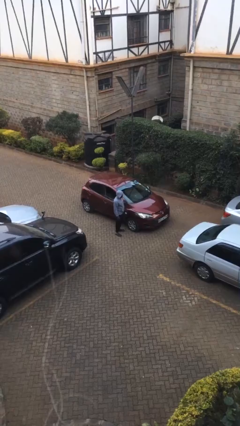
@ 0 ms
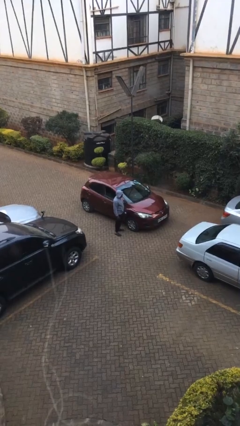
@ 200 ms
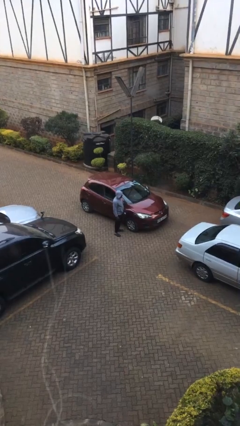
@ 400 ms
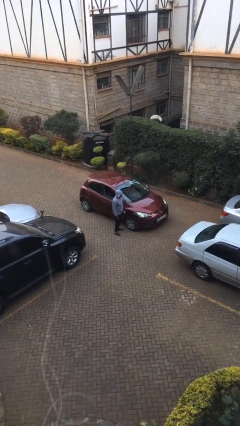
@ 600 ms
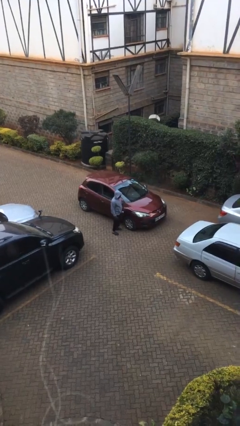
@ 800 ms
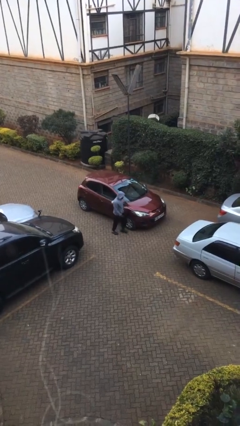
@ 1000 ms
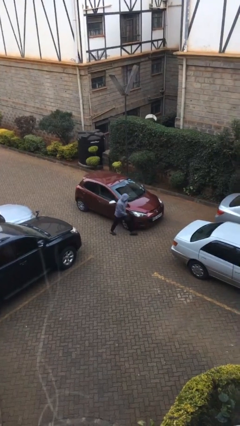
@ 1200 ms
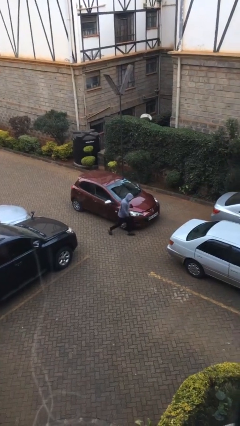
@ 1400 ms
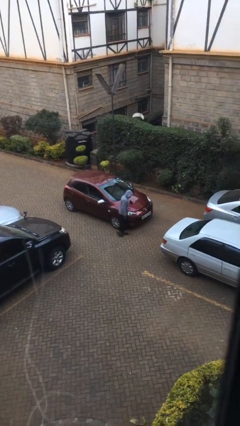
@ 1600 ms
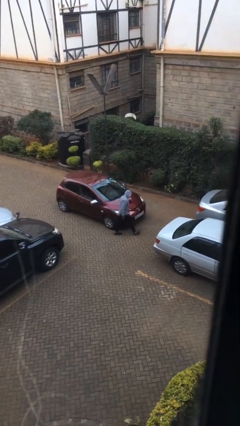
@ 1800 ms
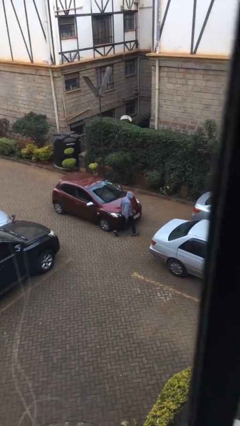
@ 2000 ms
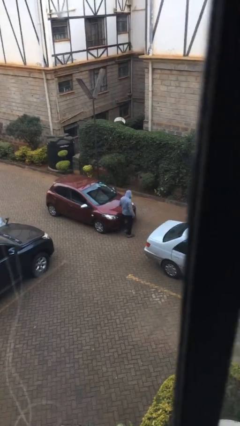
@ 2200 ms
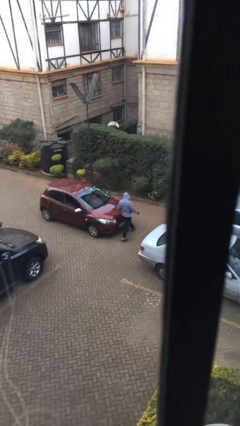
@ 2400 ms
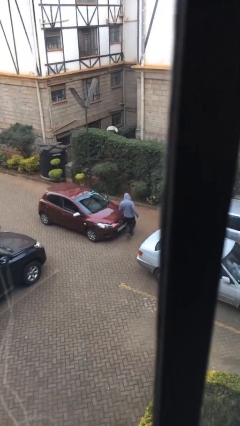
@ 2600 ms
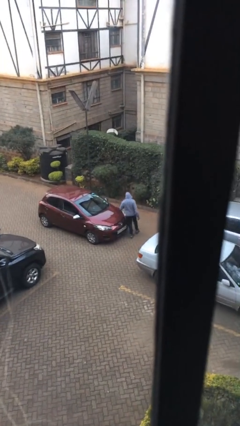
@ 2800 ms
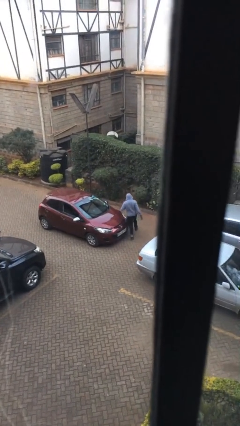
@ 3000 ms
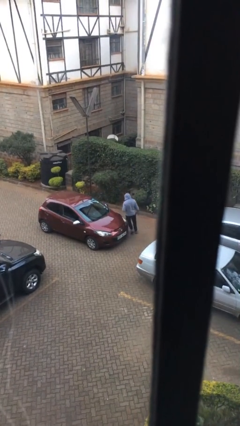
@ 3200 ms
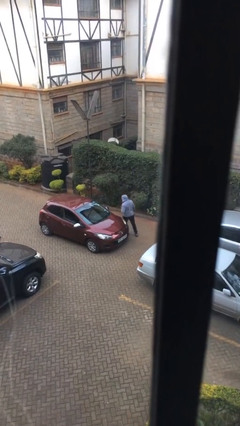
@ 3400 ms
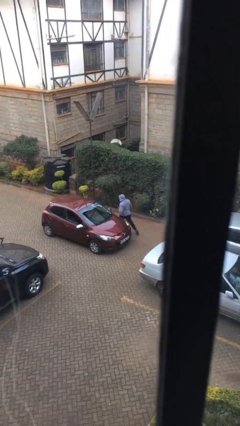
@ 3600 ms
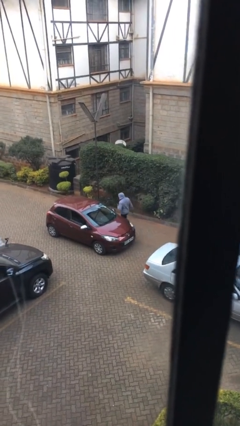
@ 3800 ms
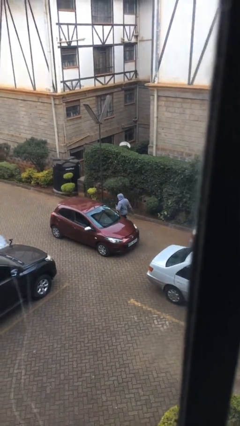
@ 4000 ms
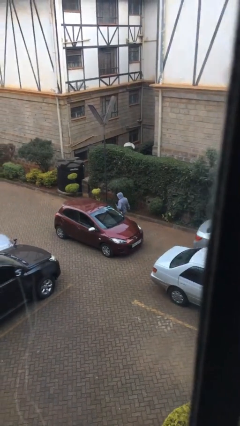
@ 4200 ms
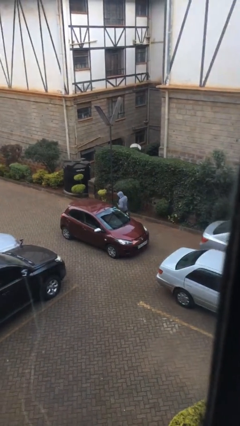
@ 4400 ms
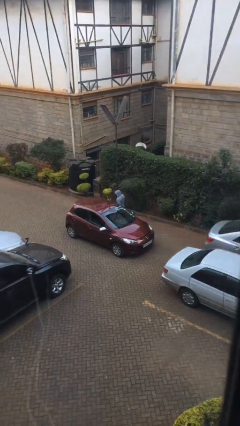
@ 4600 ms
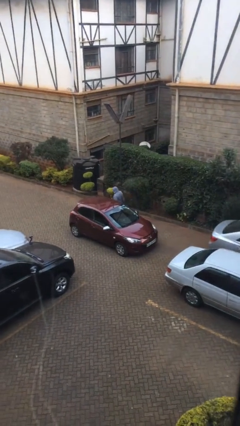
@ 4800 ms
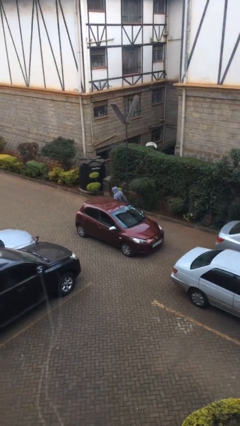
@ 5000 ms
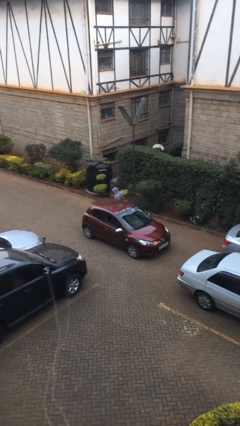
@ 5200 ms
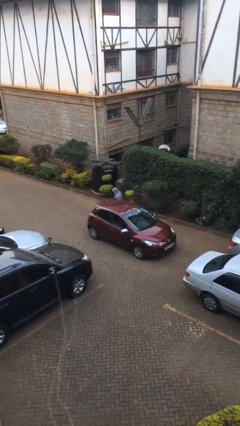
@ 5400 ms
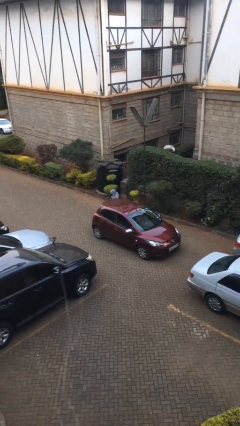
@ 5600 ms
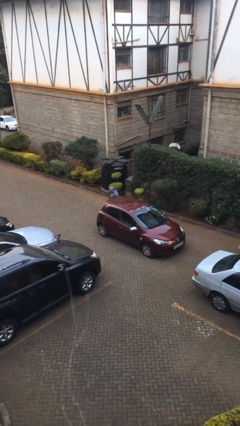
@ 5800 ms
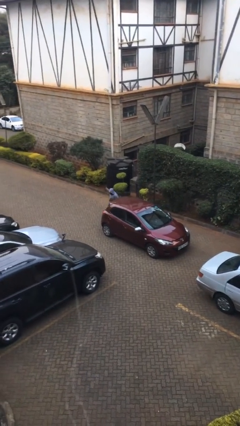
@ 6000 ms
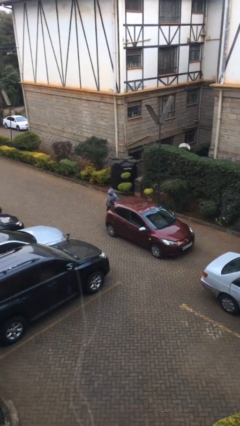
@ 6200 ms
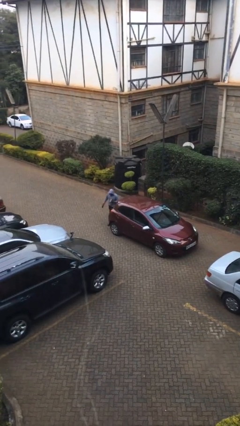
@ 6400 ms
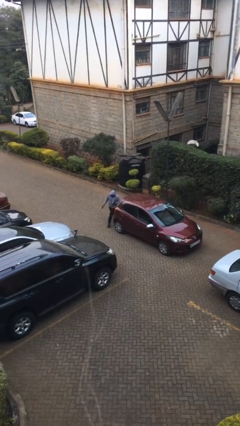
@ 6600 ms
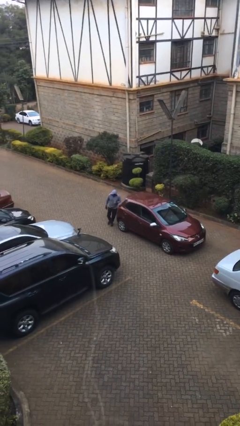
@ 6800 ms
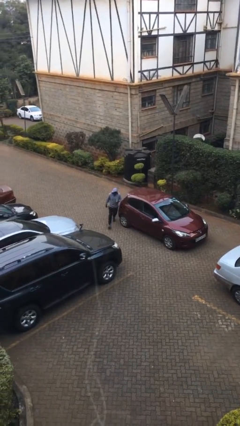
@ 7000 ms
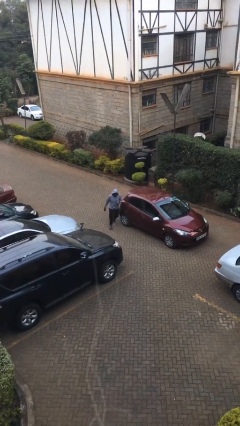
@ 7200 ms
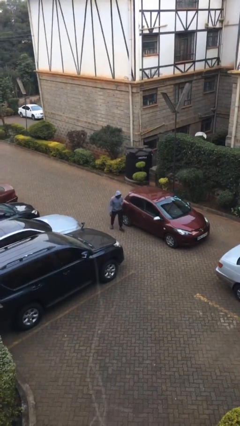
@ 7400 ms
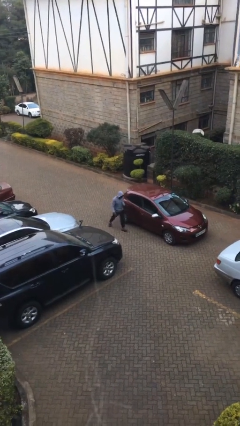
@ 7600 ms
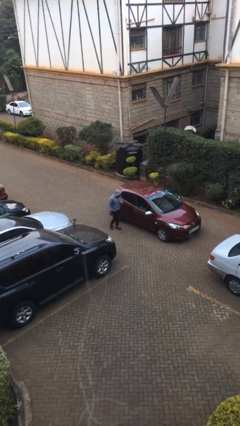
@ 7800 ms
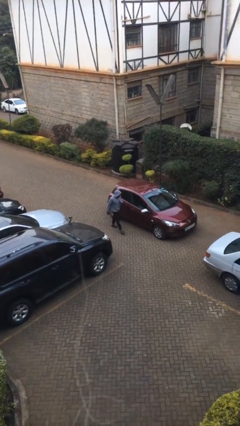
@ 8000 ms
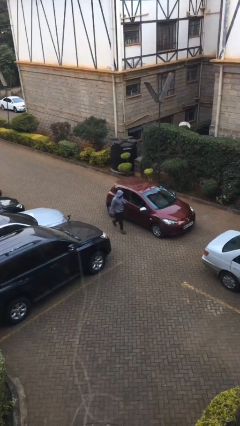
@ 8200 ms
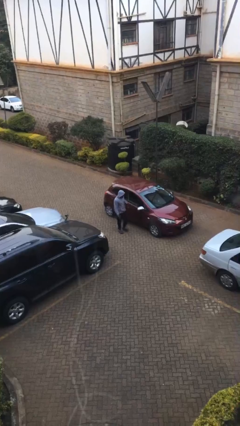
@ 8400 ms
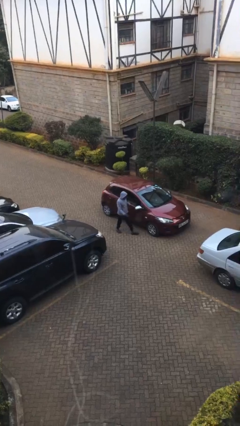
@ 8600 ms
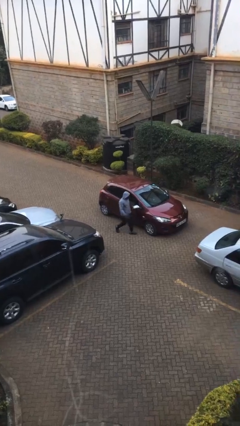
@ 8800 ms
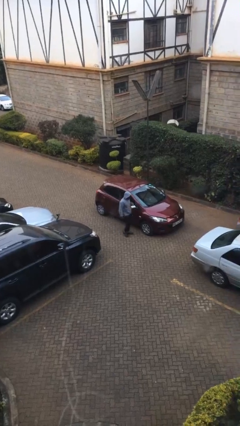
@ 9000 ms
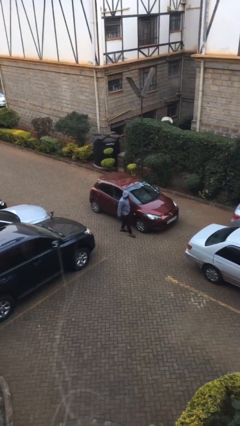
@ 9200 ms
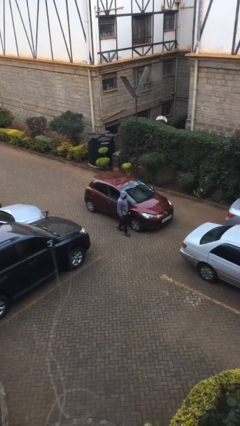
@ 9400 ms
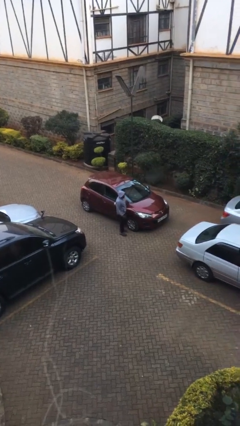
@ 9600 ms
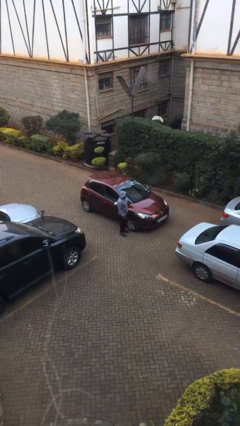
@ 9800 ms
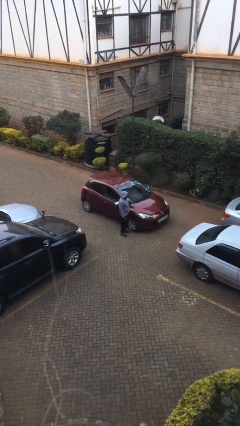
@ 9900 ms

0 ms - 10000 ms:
person walks around car

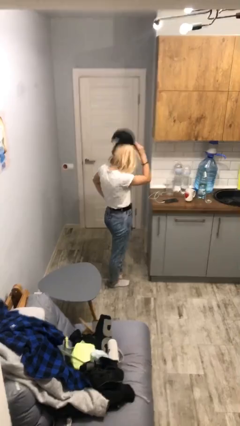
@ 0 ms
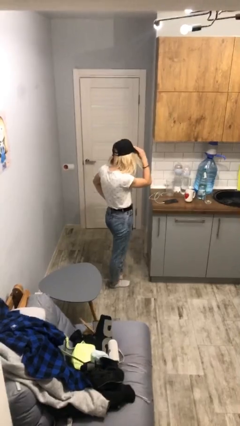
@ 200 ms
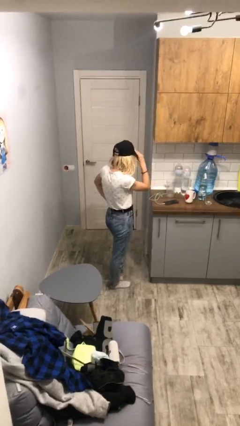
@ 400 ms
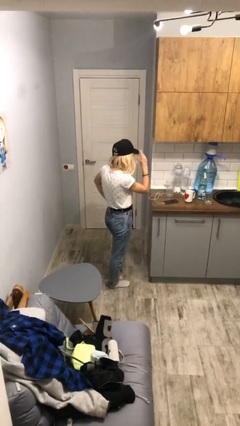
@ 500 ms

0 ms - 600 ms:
person puts on hat

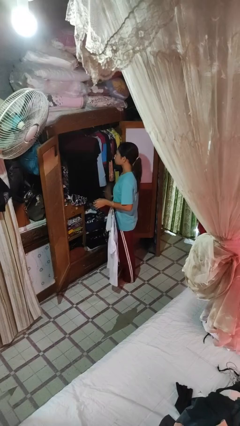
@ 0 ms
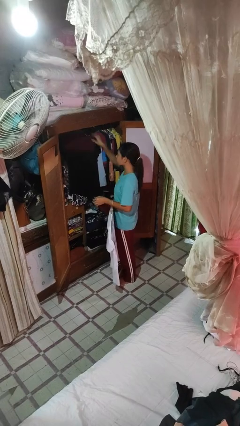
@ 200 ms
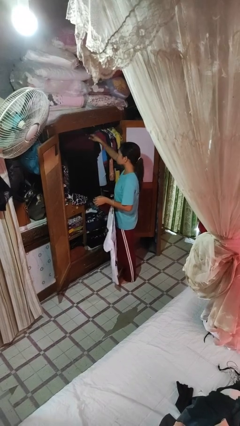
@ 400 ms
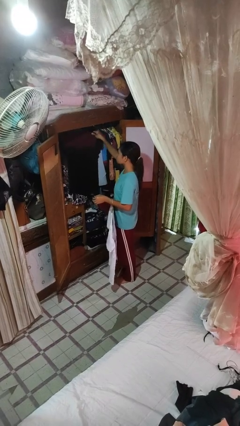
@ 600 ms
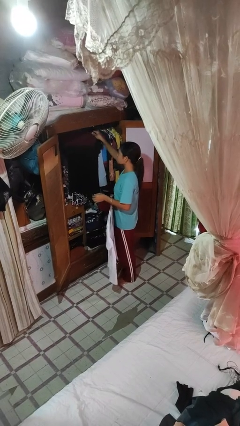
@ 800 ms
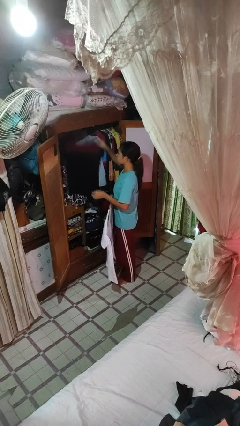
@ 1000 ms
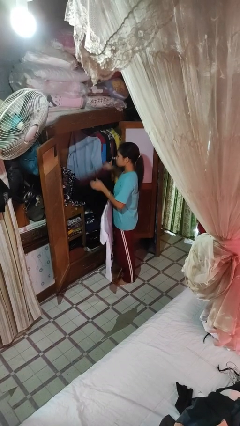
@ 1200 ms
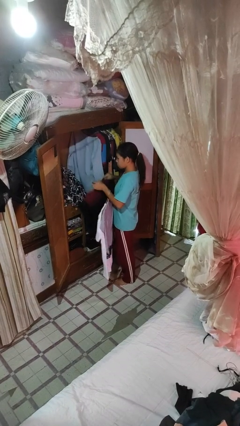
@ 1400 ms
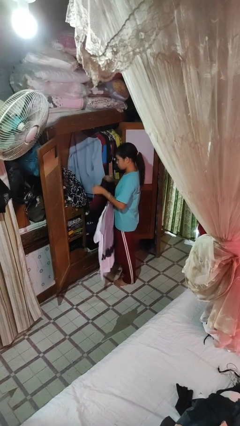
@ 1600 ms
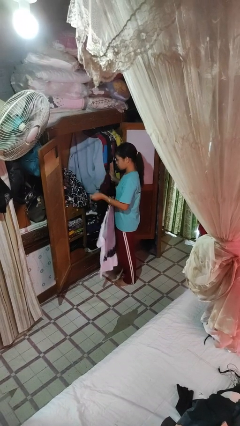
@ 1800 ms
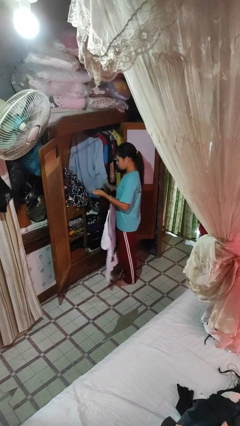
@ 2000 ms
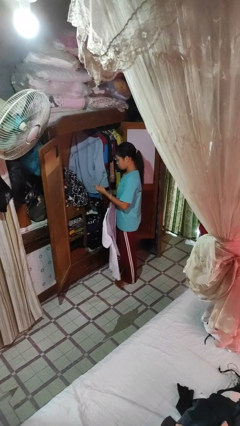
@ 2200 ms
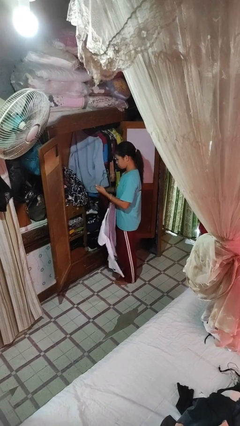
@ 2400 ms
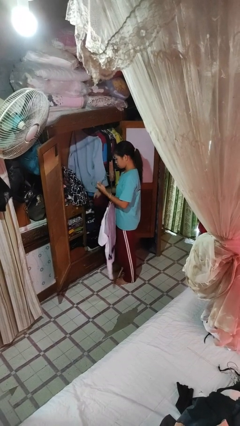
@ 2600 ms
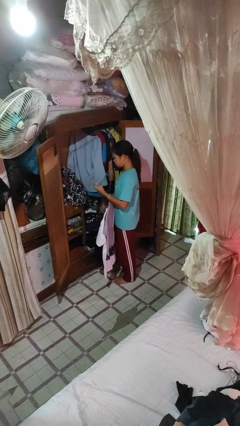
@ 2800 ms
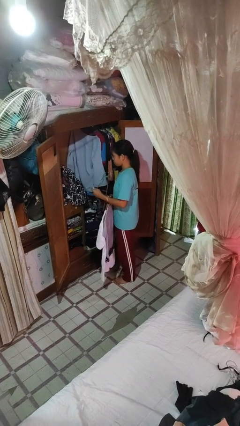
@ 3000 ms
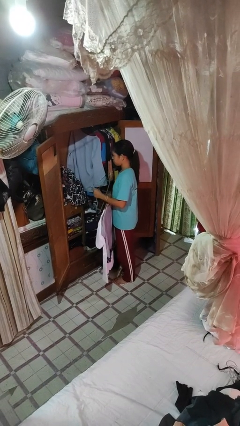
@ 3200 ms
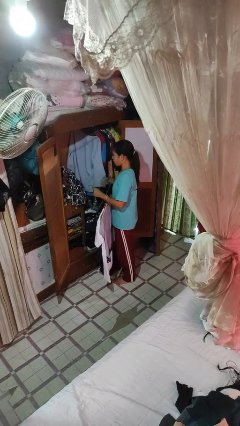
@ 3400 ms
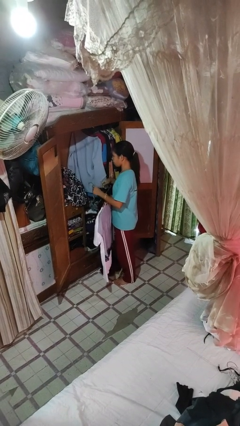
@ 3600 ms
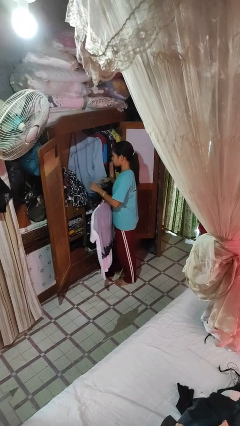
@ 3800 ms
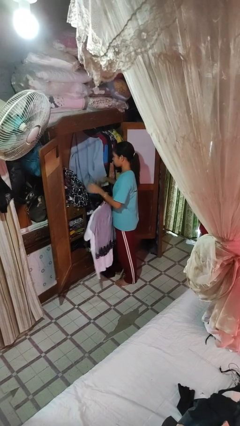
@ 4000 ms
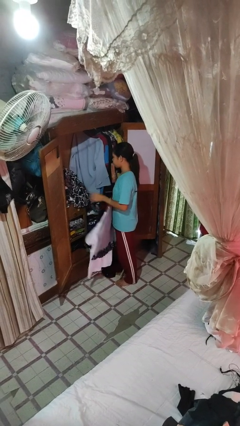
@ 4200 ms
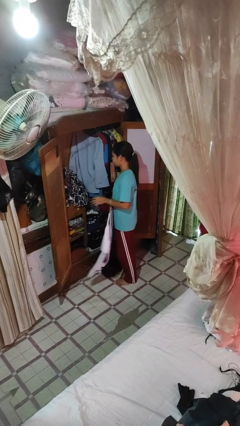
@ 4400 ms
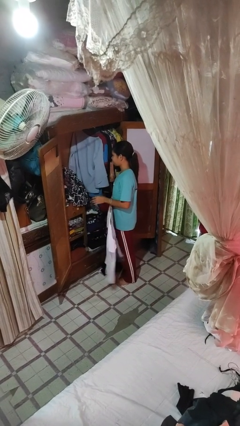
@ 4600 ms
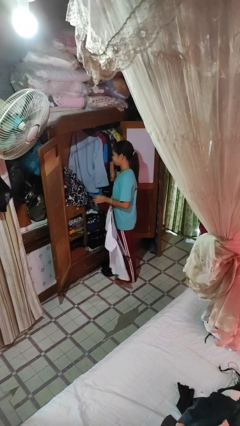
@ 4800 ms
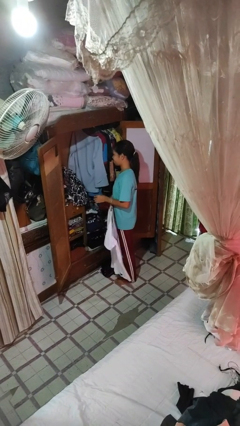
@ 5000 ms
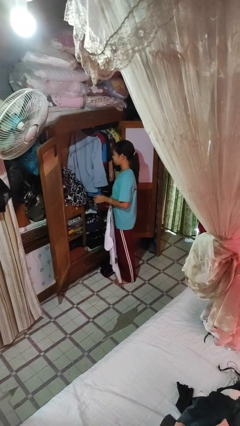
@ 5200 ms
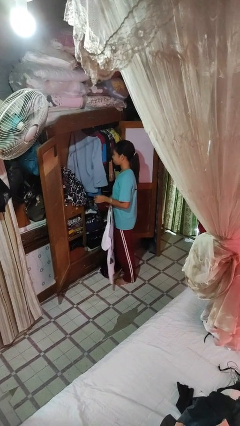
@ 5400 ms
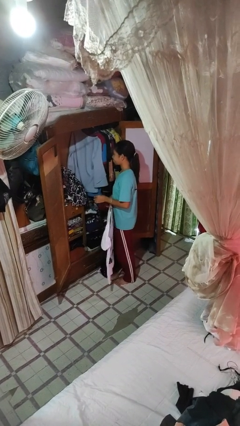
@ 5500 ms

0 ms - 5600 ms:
person takes clothes from closet

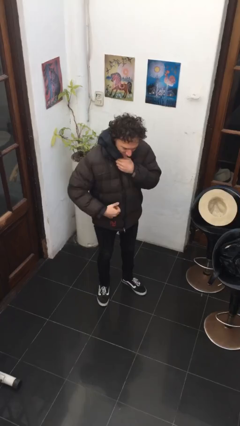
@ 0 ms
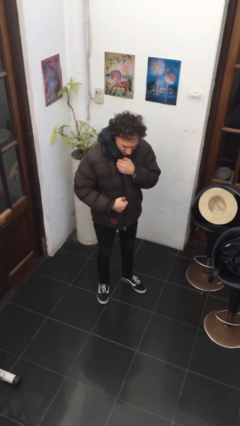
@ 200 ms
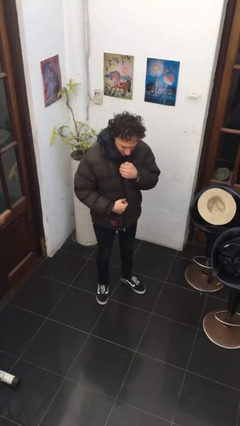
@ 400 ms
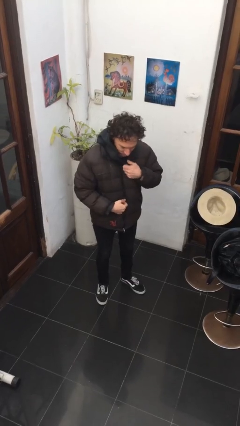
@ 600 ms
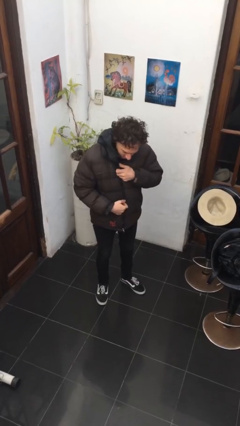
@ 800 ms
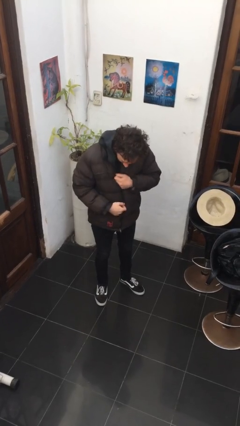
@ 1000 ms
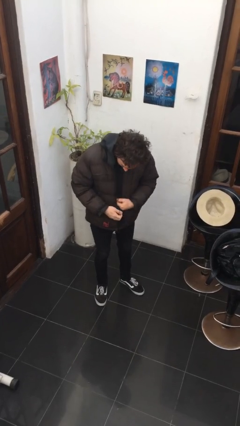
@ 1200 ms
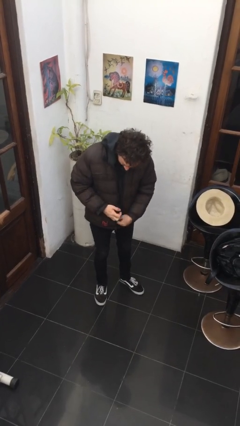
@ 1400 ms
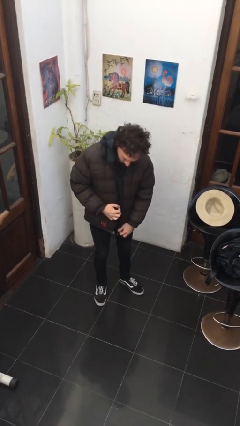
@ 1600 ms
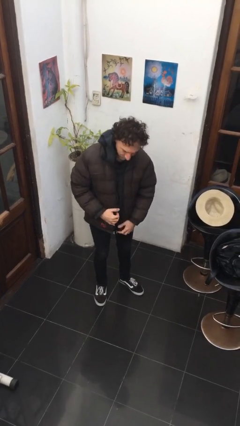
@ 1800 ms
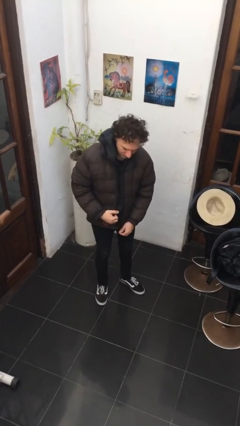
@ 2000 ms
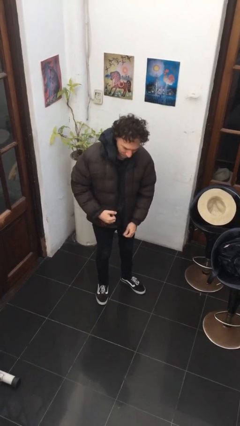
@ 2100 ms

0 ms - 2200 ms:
person unzips jacket
